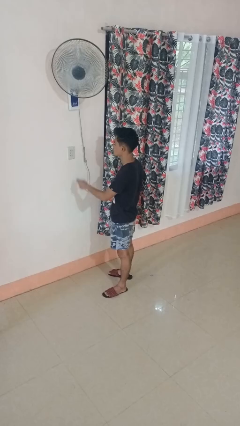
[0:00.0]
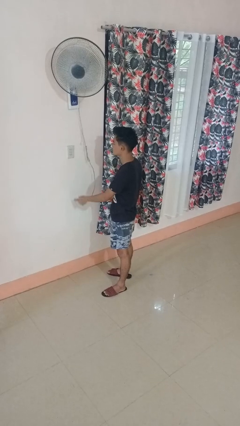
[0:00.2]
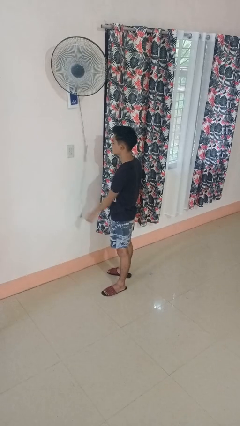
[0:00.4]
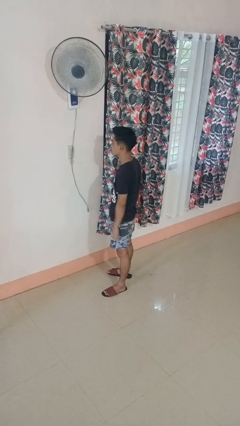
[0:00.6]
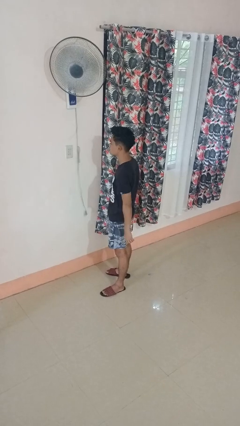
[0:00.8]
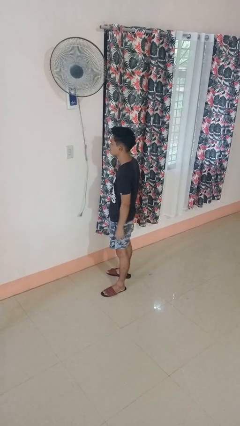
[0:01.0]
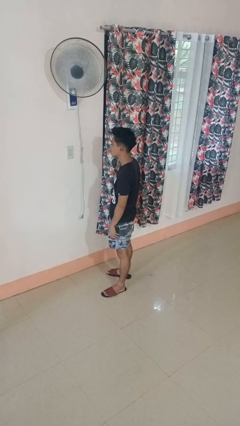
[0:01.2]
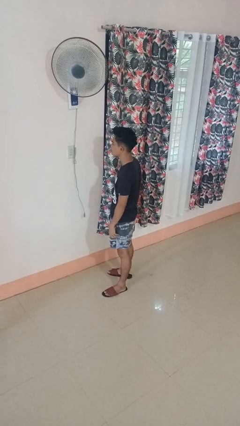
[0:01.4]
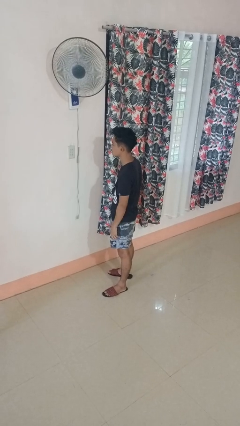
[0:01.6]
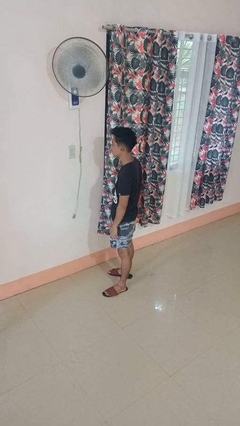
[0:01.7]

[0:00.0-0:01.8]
person unplugs from electrical socket

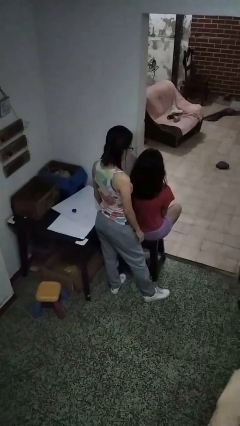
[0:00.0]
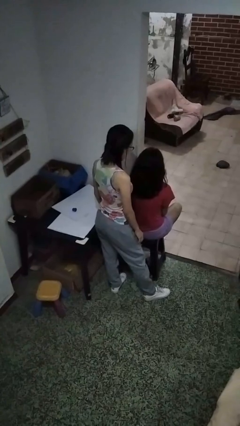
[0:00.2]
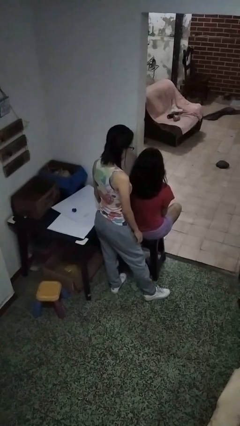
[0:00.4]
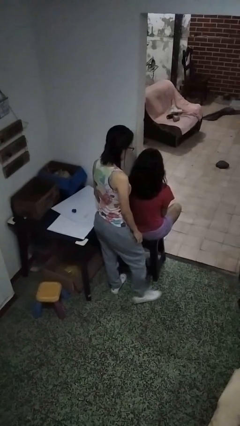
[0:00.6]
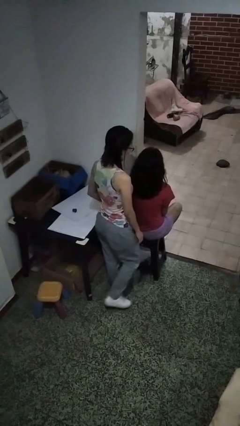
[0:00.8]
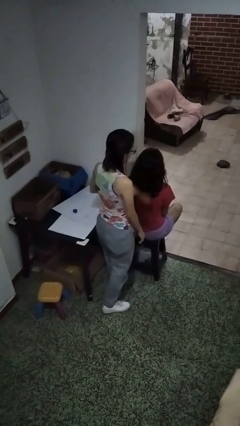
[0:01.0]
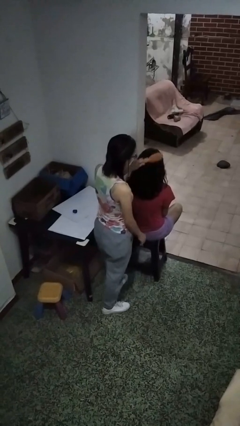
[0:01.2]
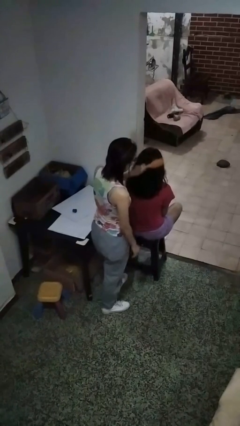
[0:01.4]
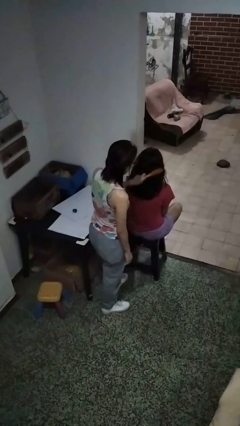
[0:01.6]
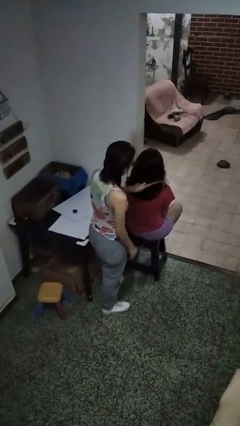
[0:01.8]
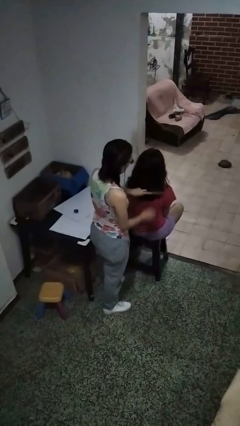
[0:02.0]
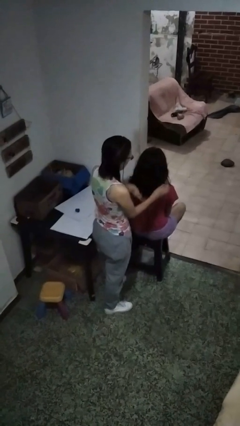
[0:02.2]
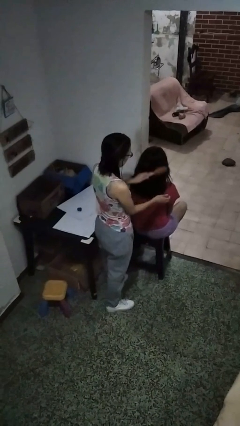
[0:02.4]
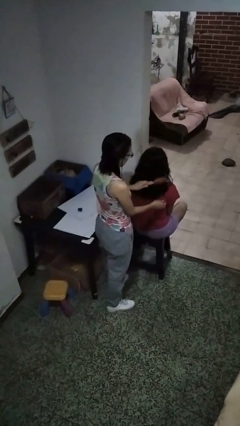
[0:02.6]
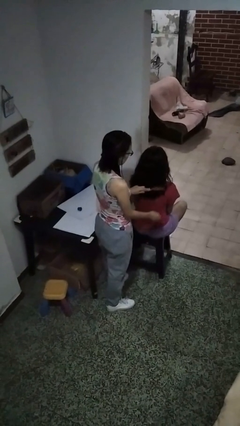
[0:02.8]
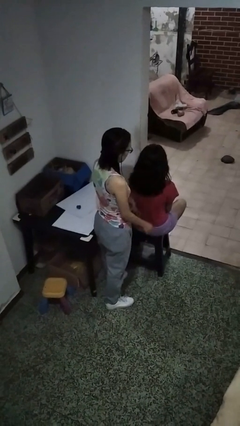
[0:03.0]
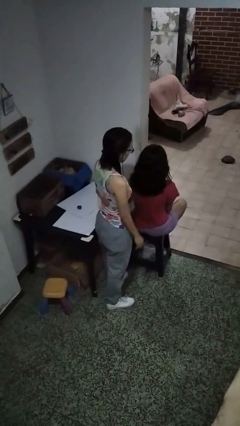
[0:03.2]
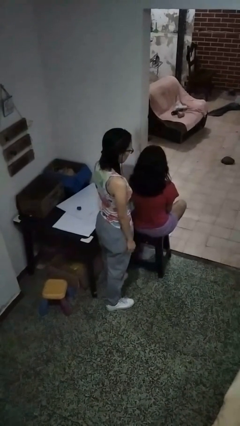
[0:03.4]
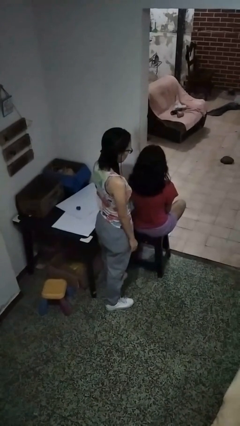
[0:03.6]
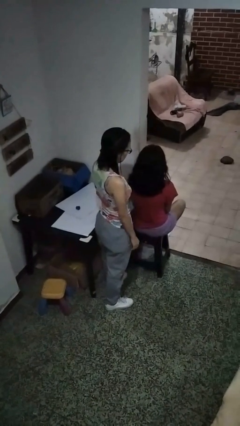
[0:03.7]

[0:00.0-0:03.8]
person brushes hair of person

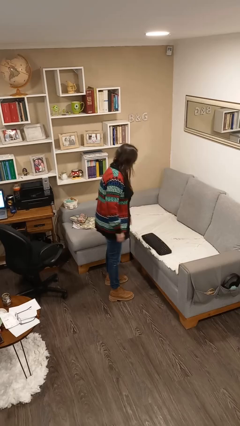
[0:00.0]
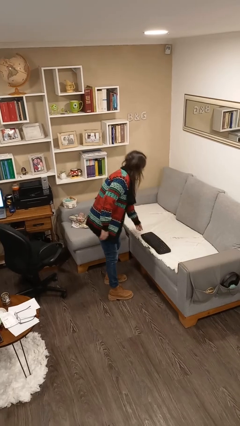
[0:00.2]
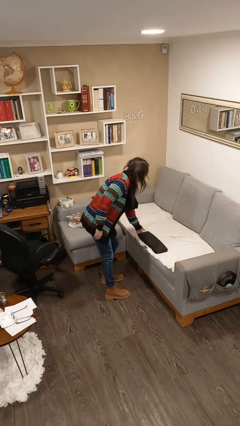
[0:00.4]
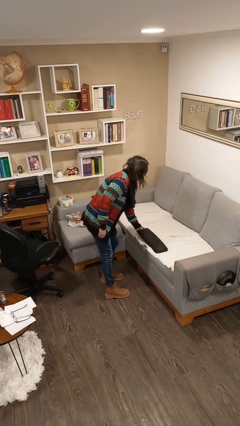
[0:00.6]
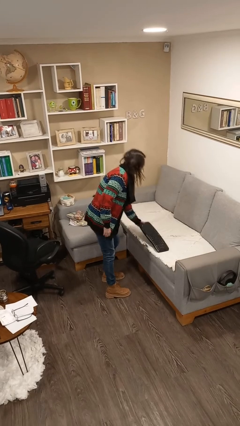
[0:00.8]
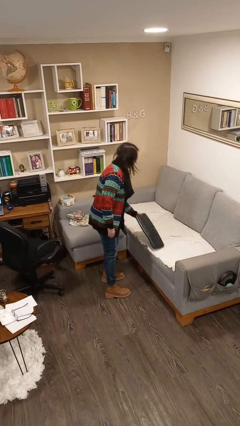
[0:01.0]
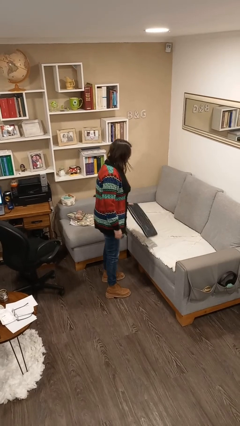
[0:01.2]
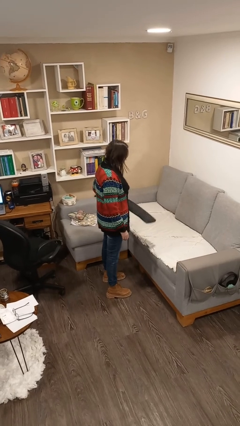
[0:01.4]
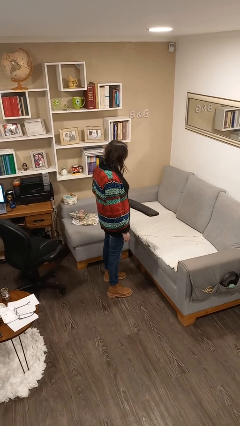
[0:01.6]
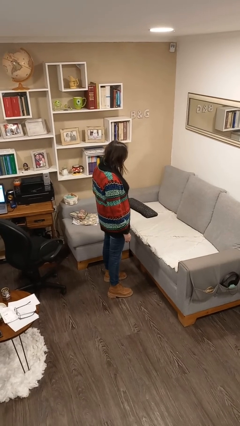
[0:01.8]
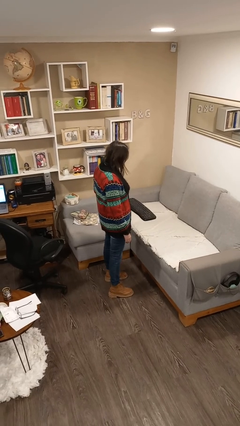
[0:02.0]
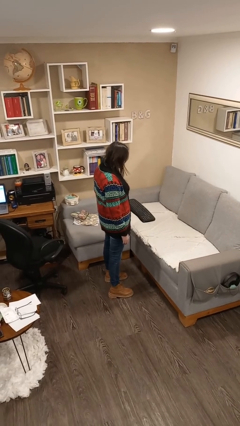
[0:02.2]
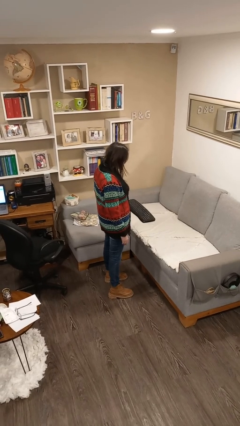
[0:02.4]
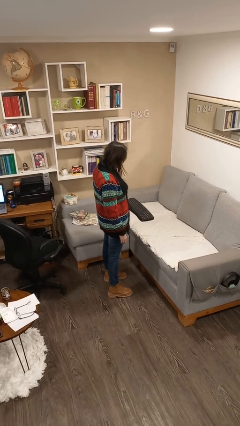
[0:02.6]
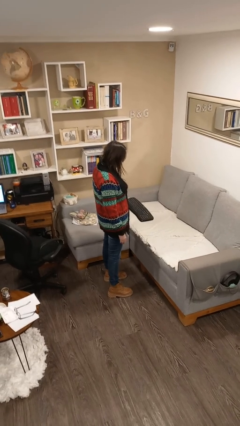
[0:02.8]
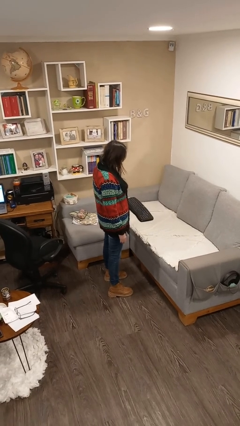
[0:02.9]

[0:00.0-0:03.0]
person picks up object from couch

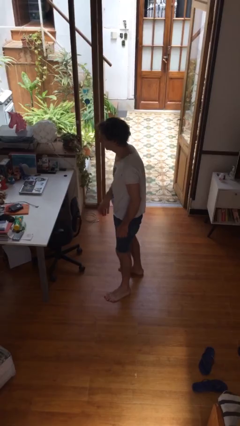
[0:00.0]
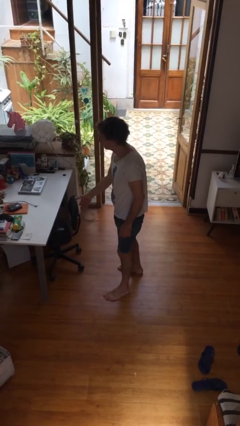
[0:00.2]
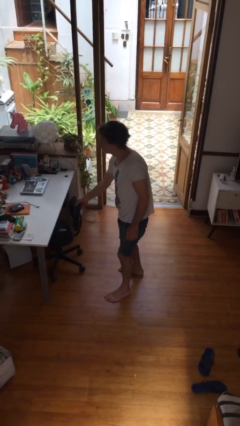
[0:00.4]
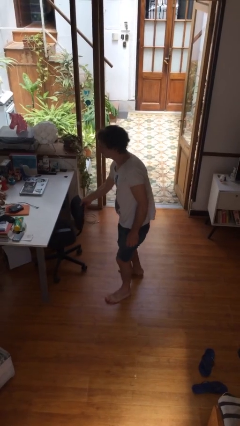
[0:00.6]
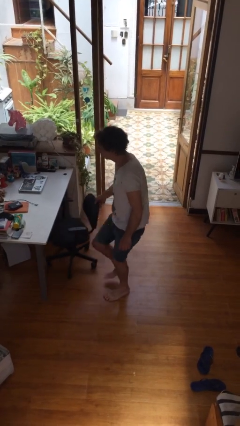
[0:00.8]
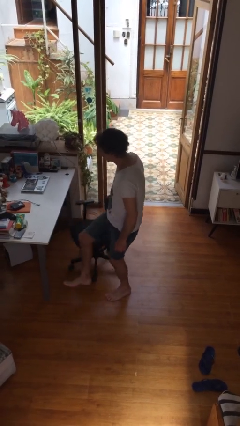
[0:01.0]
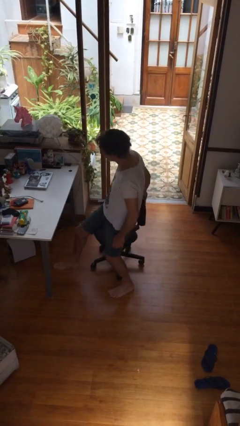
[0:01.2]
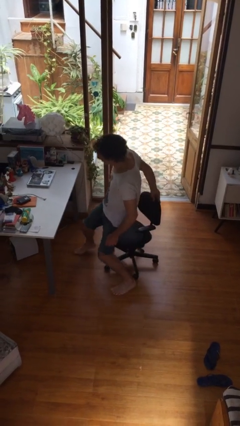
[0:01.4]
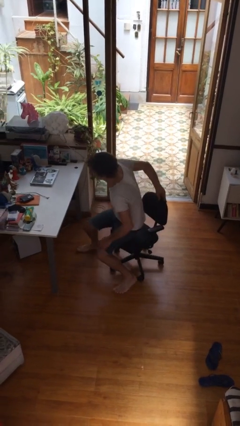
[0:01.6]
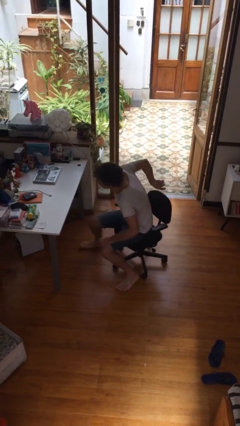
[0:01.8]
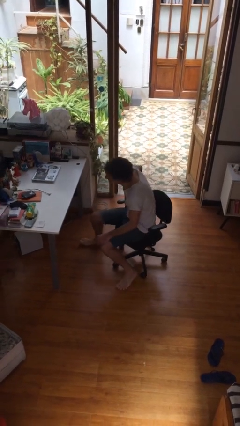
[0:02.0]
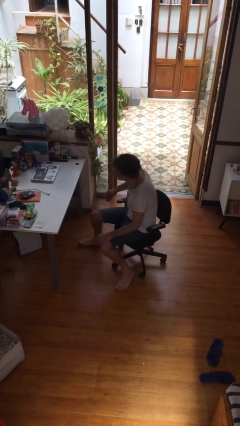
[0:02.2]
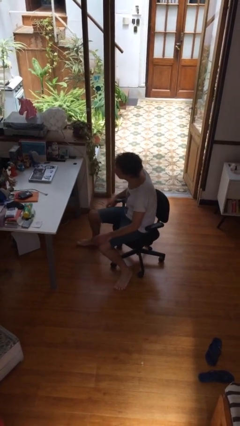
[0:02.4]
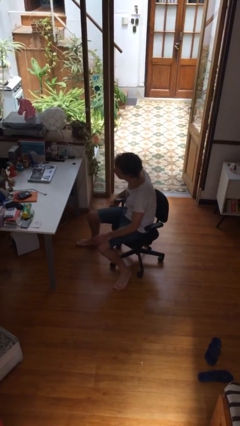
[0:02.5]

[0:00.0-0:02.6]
person sits down

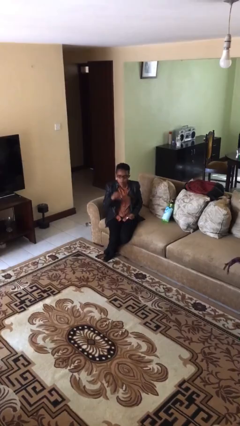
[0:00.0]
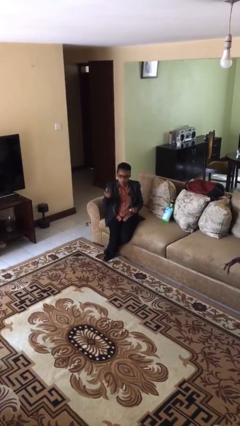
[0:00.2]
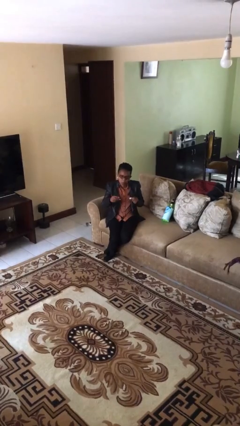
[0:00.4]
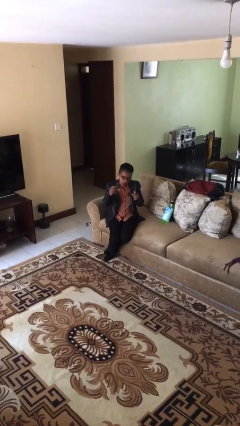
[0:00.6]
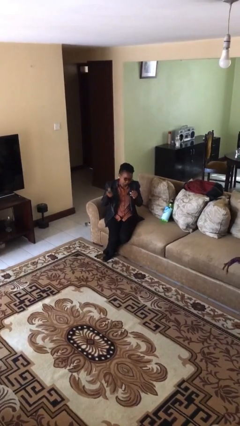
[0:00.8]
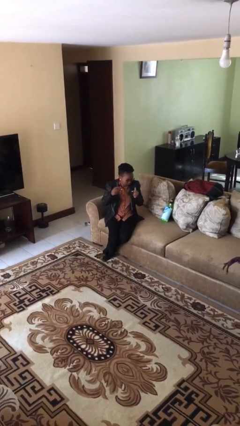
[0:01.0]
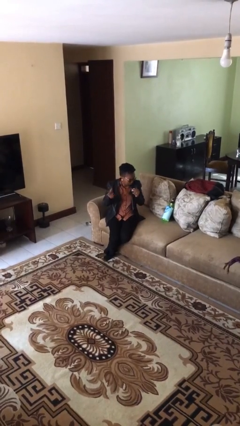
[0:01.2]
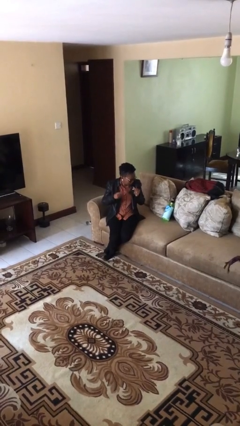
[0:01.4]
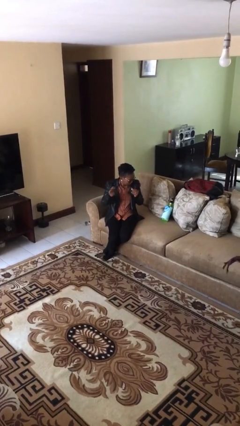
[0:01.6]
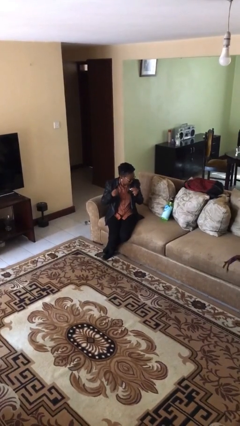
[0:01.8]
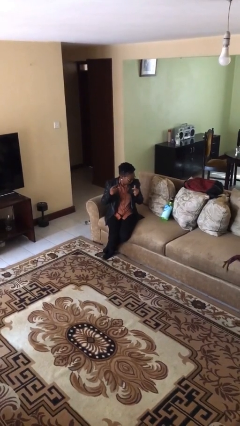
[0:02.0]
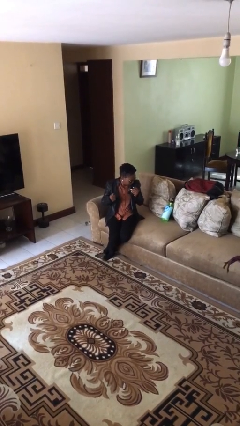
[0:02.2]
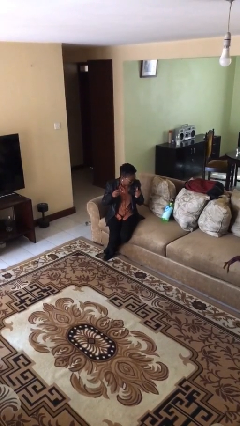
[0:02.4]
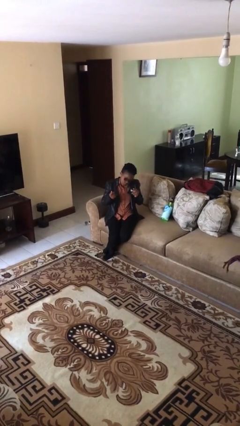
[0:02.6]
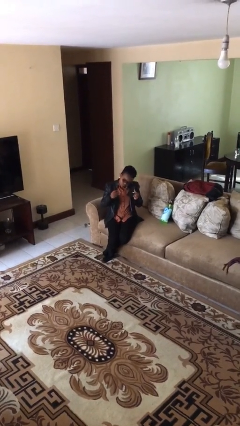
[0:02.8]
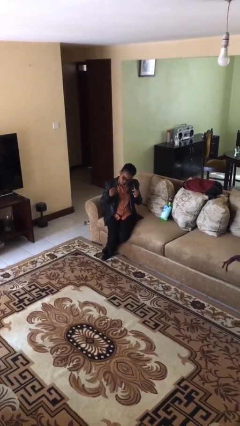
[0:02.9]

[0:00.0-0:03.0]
person snaps fingers

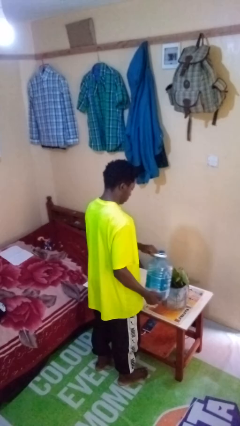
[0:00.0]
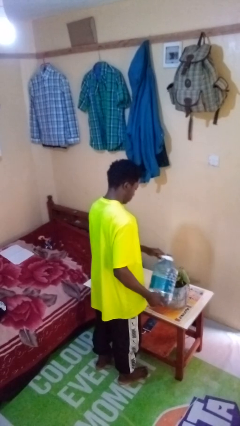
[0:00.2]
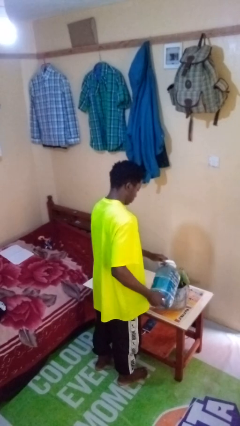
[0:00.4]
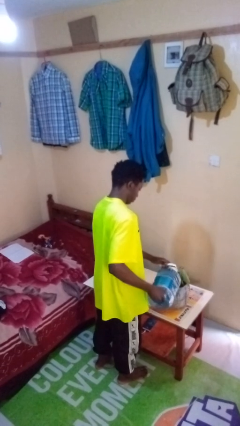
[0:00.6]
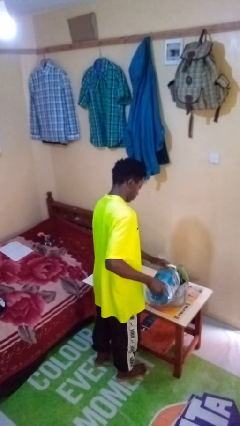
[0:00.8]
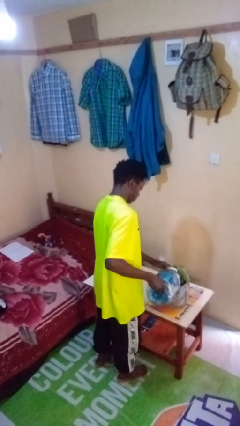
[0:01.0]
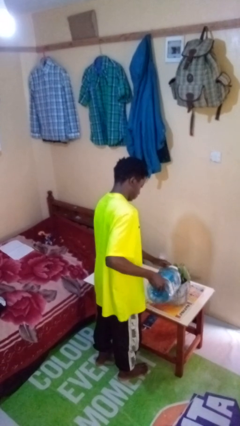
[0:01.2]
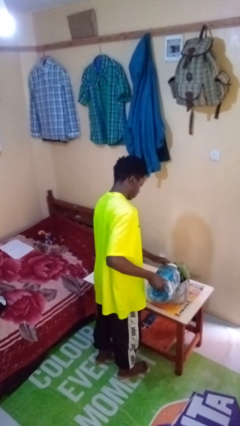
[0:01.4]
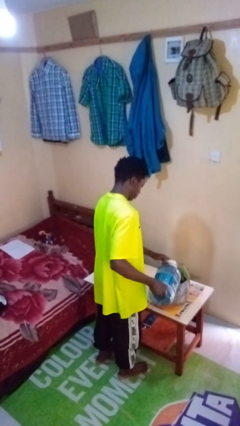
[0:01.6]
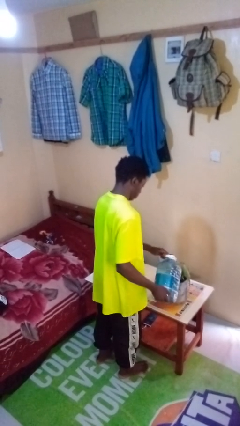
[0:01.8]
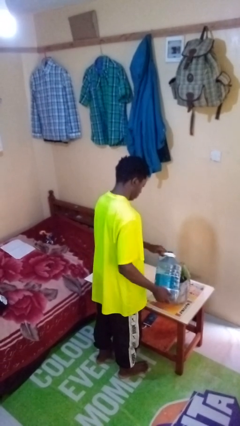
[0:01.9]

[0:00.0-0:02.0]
person waters houseplant

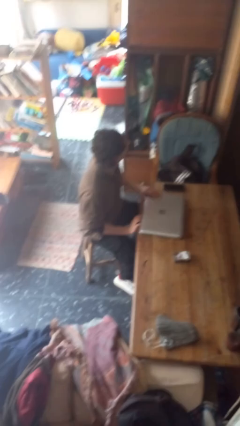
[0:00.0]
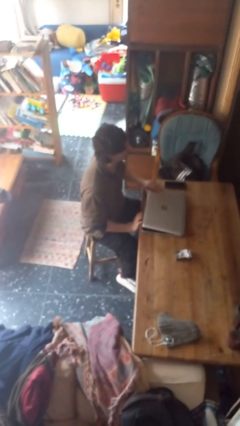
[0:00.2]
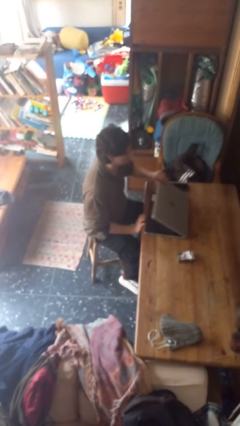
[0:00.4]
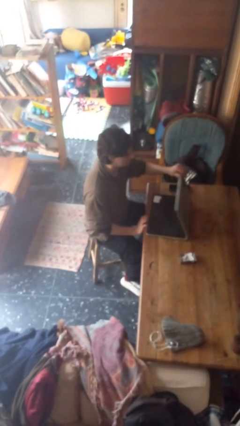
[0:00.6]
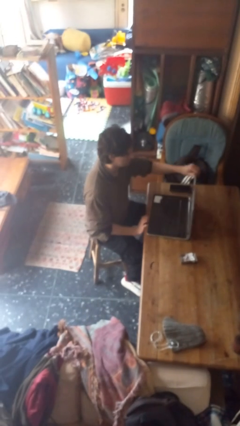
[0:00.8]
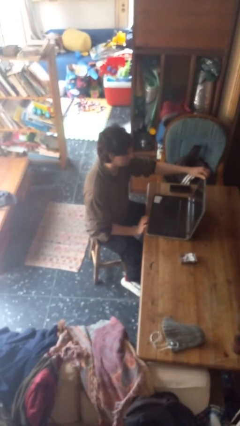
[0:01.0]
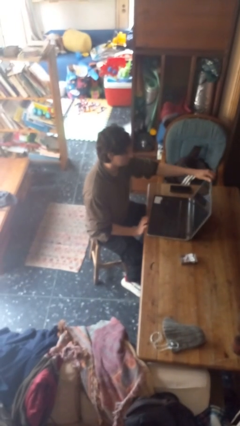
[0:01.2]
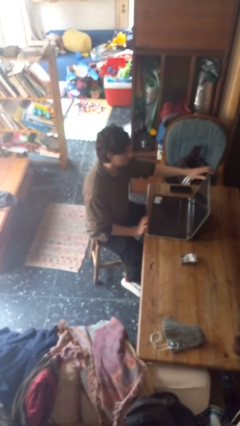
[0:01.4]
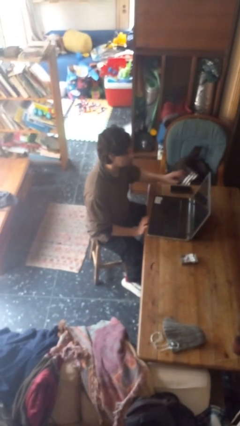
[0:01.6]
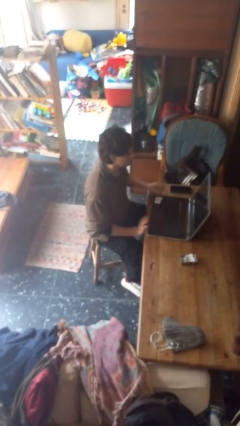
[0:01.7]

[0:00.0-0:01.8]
person opens laptop
